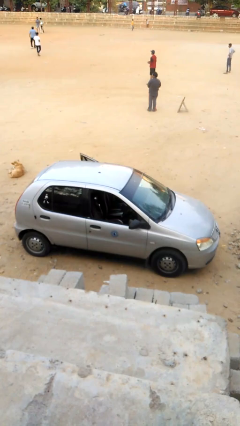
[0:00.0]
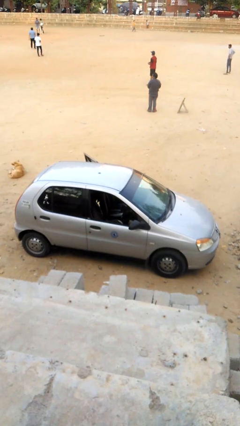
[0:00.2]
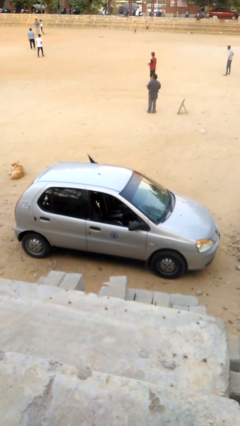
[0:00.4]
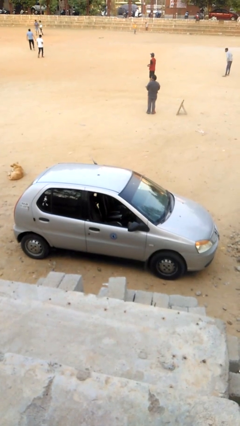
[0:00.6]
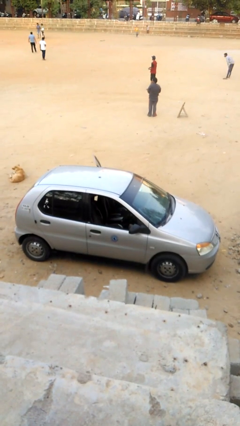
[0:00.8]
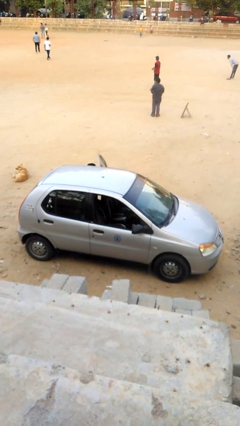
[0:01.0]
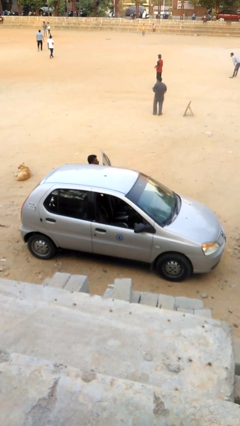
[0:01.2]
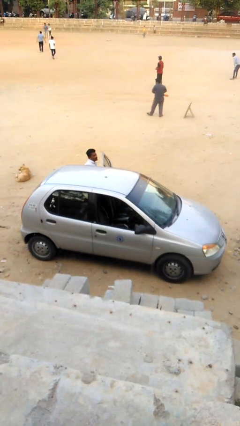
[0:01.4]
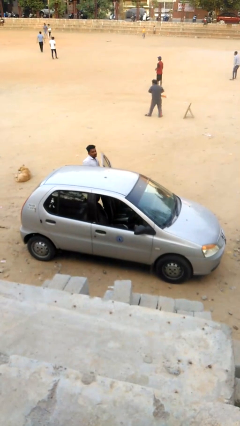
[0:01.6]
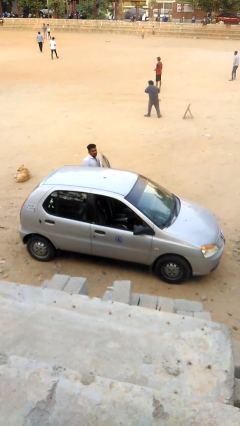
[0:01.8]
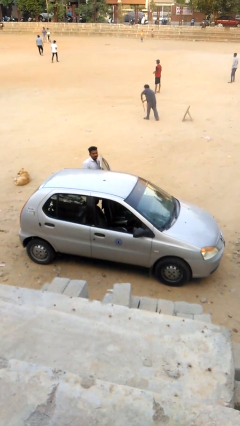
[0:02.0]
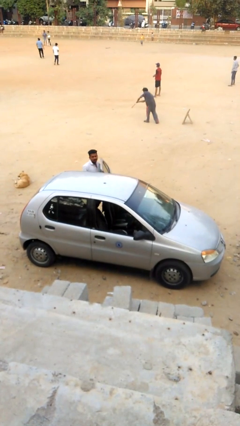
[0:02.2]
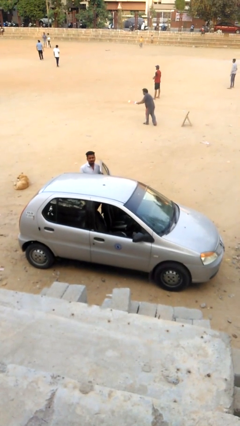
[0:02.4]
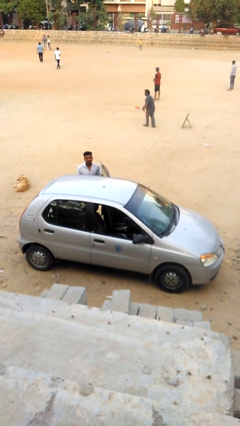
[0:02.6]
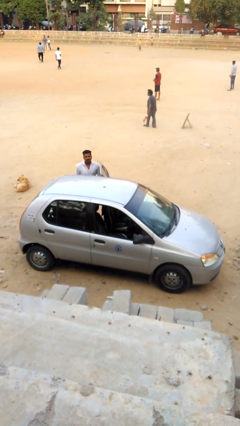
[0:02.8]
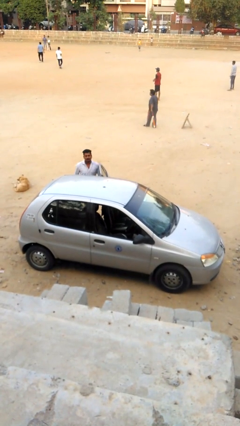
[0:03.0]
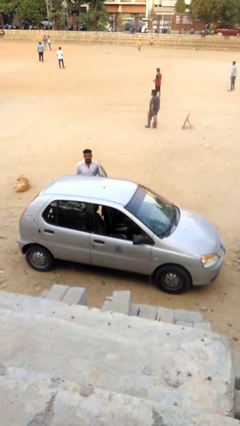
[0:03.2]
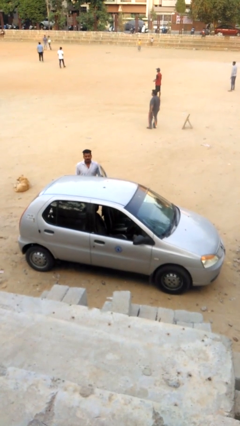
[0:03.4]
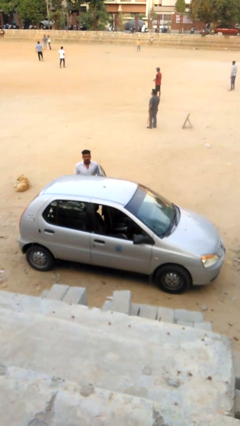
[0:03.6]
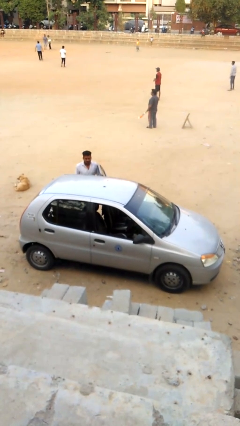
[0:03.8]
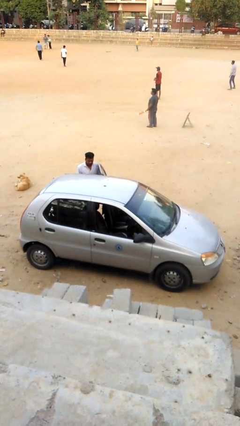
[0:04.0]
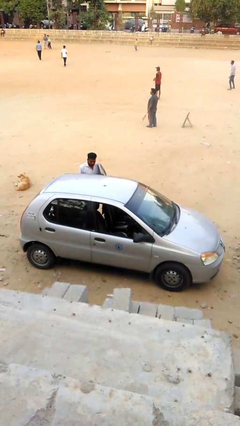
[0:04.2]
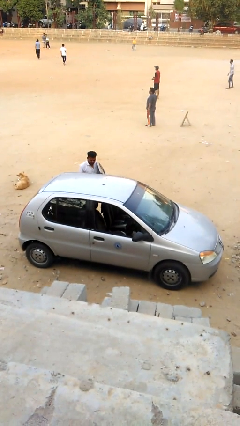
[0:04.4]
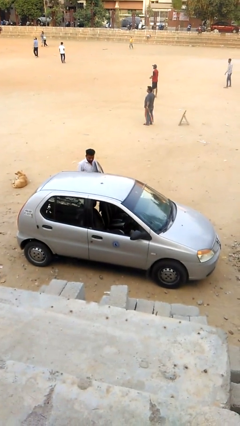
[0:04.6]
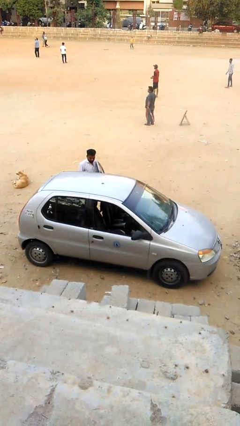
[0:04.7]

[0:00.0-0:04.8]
car drops off person

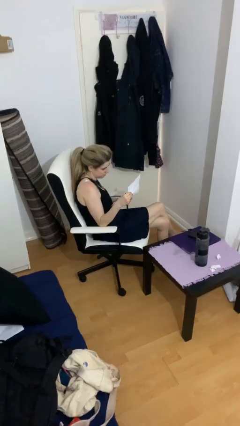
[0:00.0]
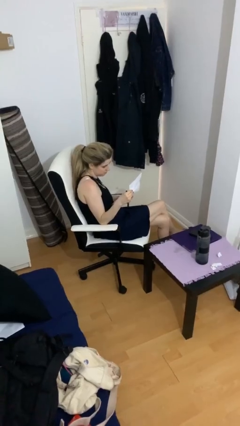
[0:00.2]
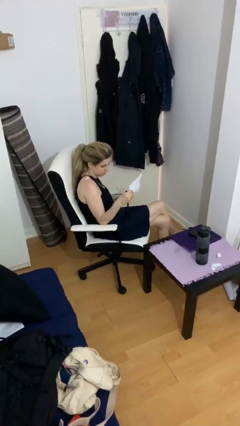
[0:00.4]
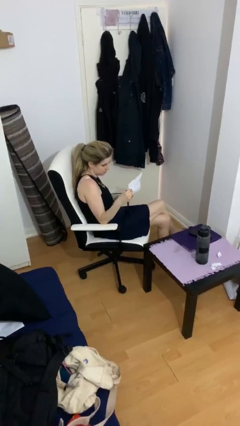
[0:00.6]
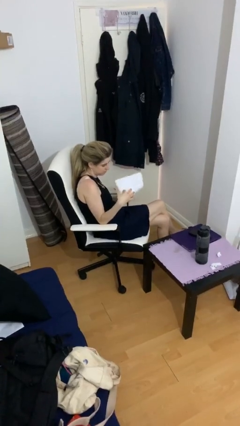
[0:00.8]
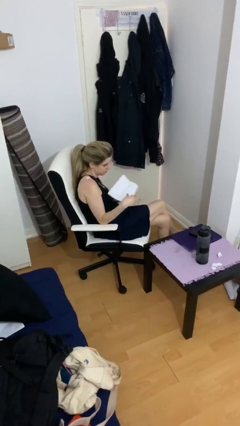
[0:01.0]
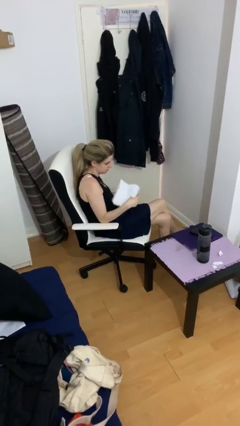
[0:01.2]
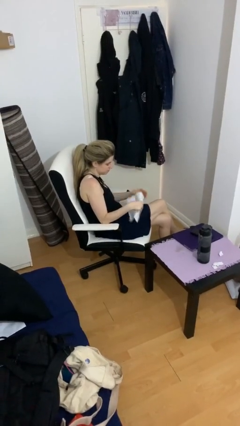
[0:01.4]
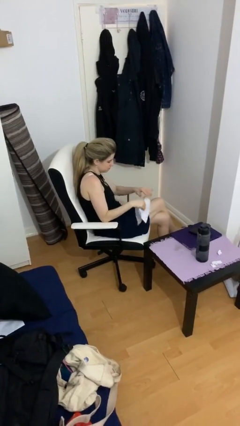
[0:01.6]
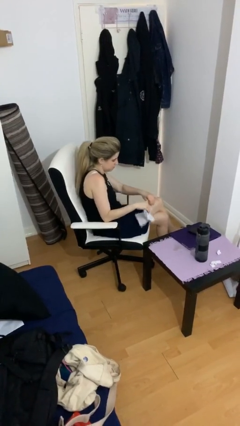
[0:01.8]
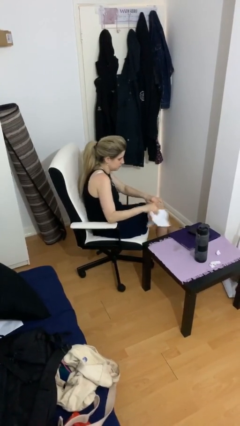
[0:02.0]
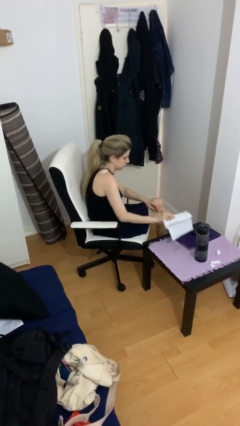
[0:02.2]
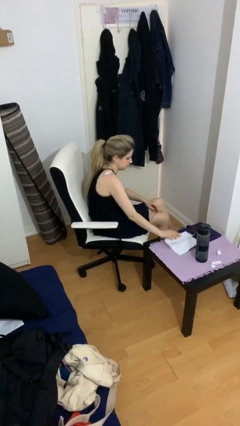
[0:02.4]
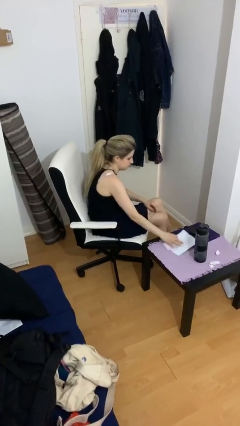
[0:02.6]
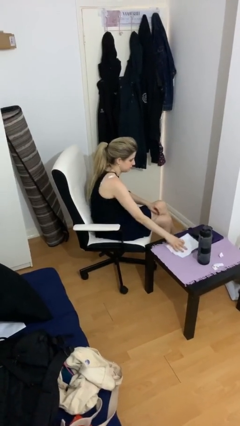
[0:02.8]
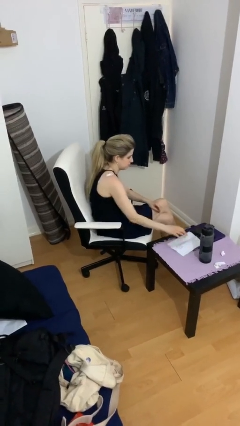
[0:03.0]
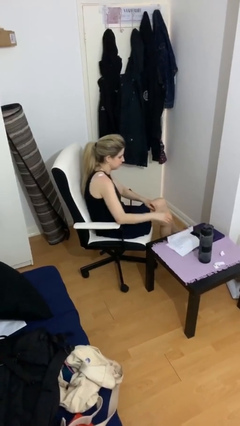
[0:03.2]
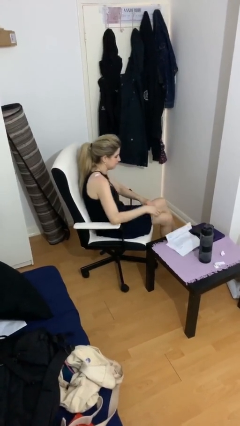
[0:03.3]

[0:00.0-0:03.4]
person puts down object on table

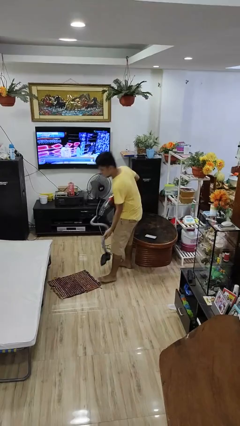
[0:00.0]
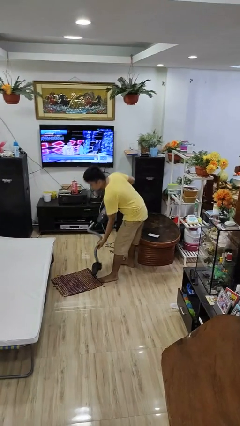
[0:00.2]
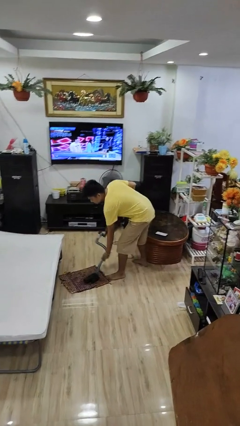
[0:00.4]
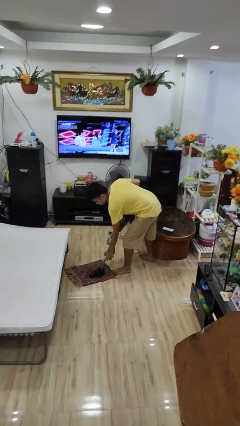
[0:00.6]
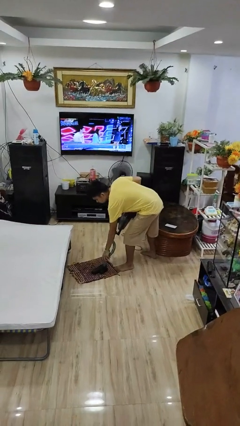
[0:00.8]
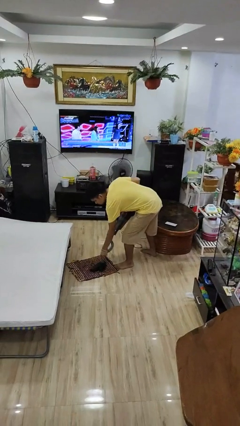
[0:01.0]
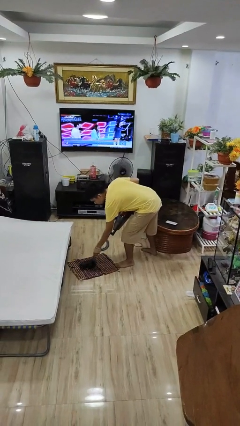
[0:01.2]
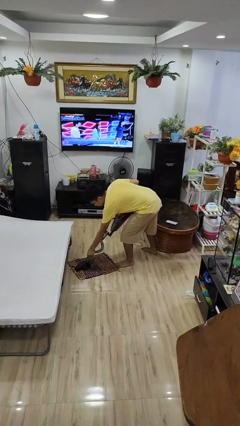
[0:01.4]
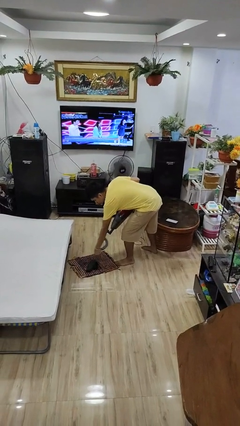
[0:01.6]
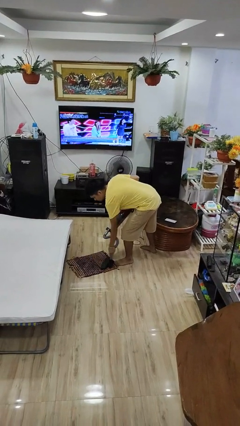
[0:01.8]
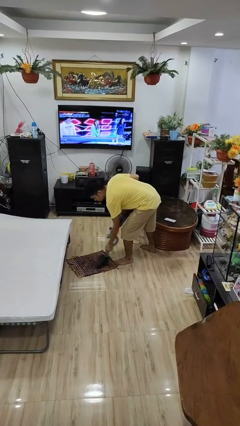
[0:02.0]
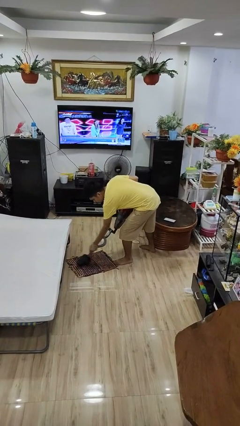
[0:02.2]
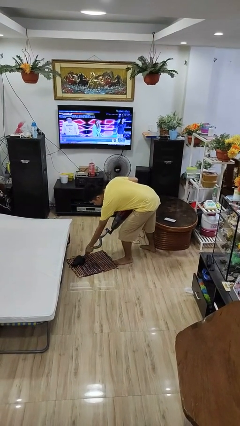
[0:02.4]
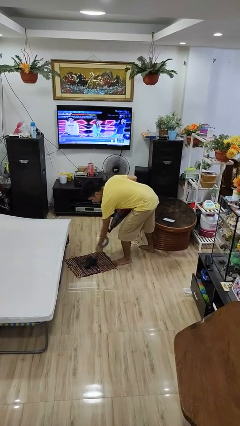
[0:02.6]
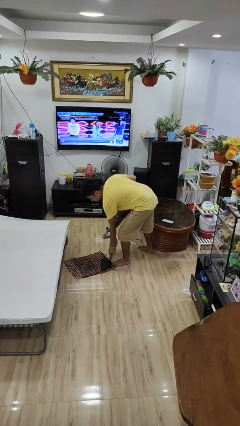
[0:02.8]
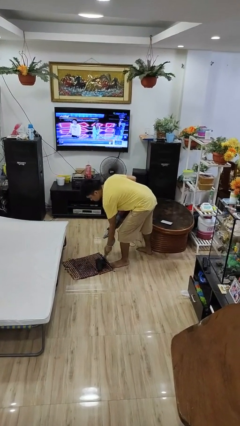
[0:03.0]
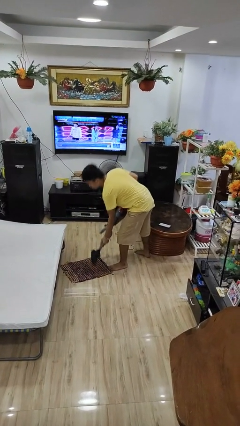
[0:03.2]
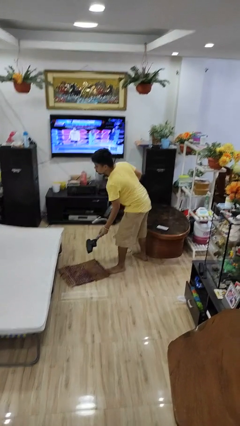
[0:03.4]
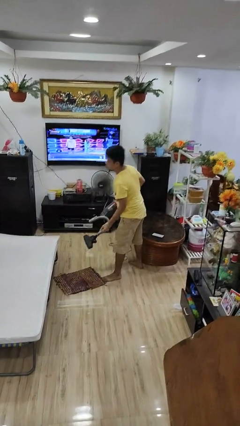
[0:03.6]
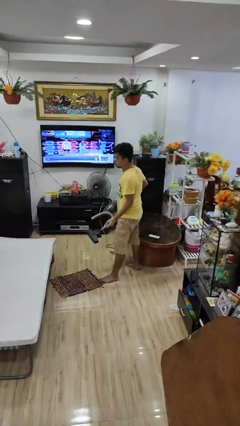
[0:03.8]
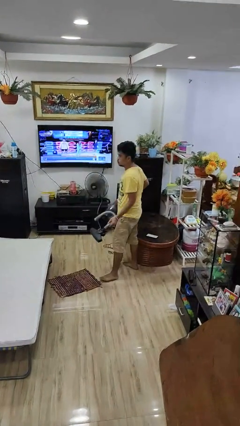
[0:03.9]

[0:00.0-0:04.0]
person vacuums carpet

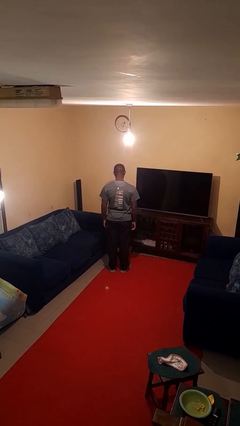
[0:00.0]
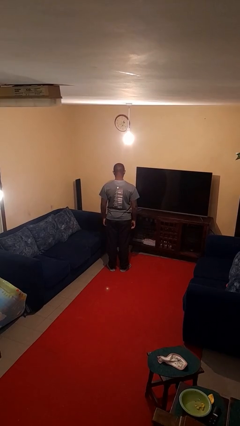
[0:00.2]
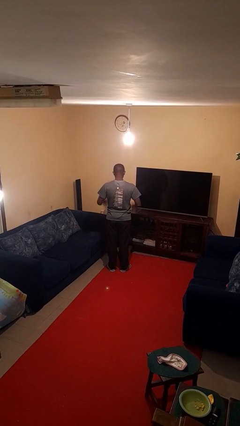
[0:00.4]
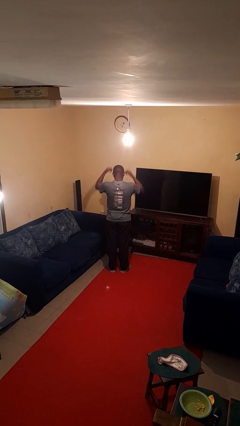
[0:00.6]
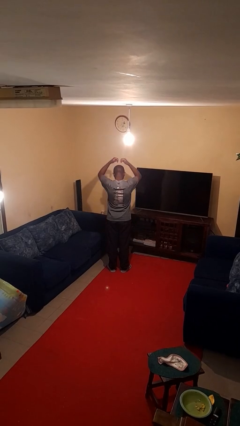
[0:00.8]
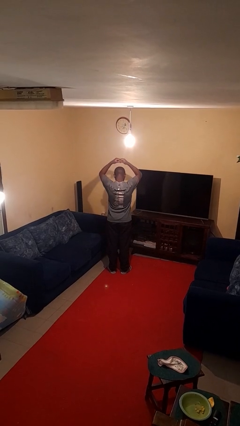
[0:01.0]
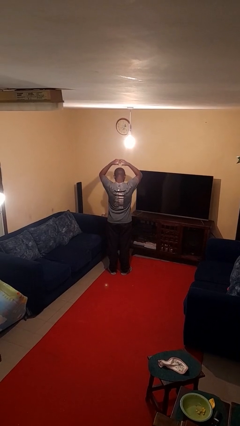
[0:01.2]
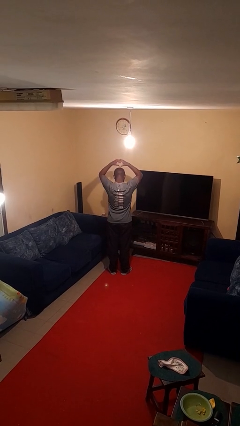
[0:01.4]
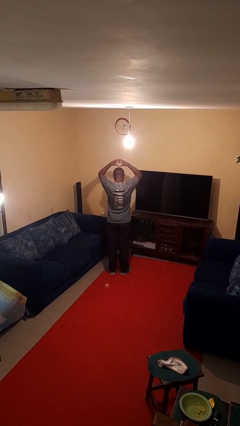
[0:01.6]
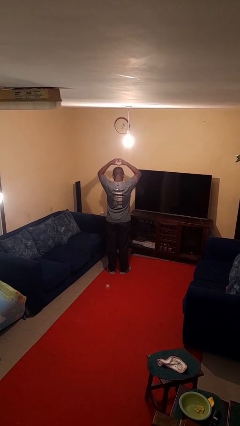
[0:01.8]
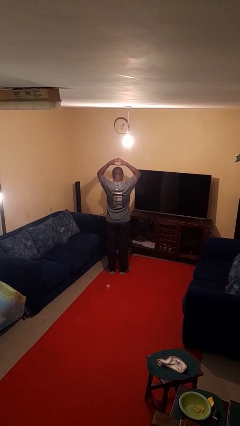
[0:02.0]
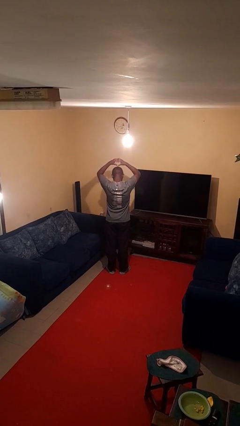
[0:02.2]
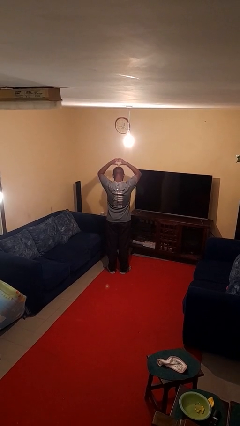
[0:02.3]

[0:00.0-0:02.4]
person gestures heart

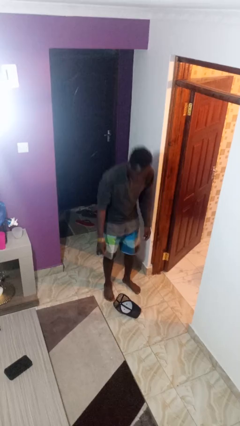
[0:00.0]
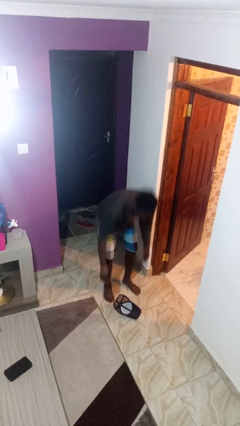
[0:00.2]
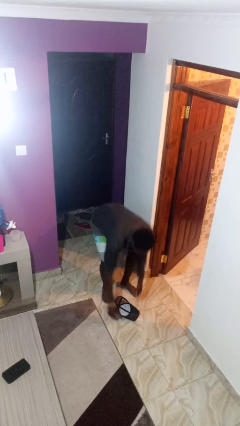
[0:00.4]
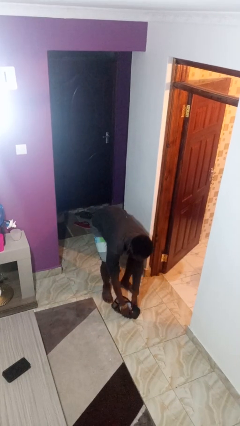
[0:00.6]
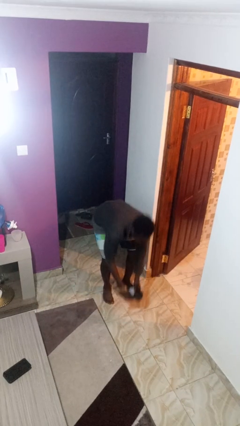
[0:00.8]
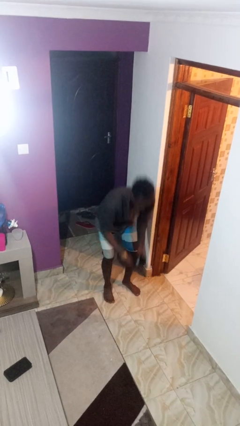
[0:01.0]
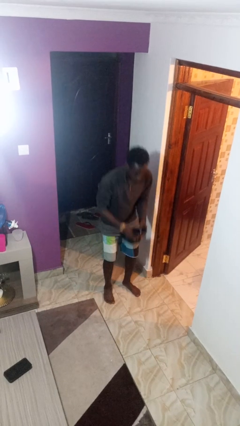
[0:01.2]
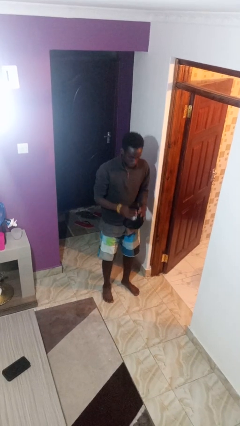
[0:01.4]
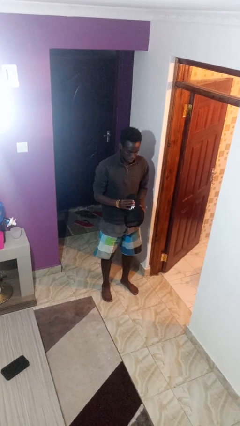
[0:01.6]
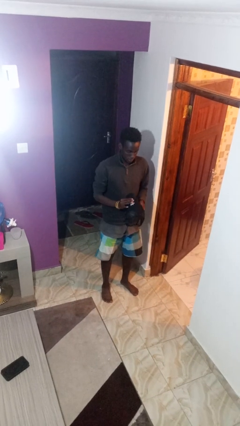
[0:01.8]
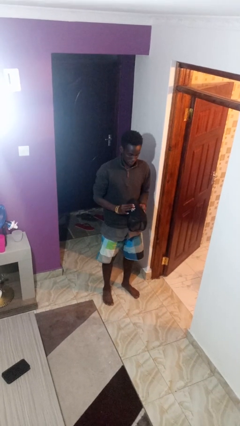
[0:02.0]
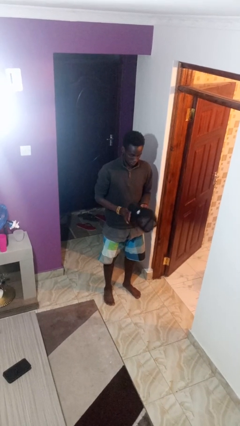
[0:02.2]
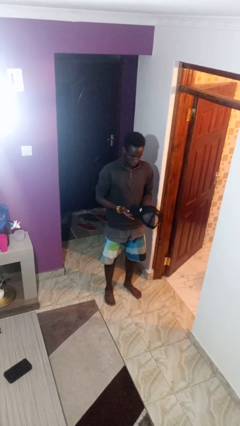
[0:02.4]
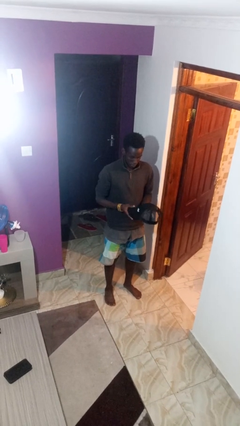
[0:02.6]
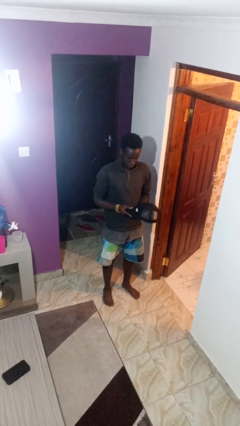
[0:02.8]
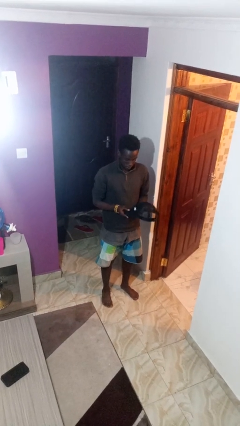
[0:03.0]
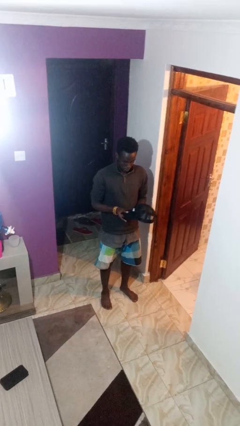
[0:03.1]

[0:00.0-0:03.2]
person picks up object from floor
